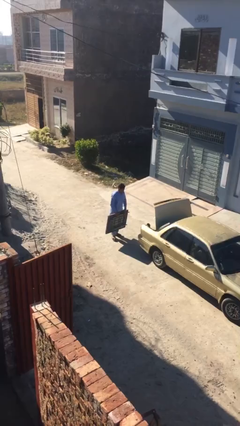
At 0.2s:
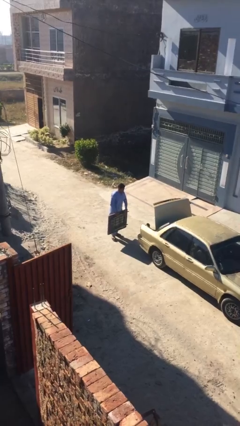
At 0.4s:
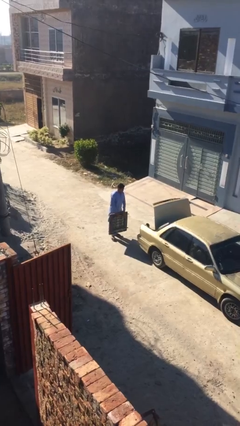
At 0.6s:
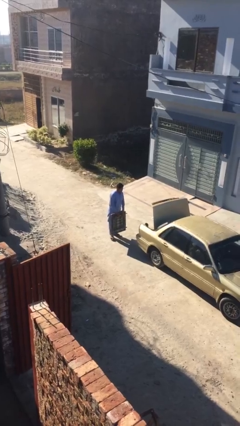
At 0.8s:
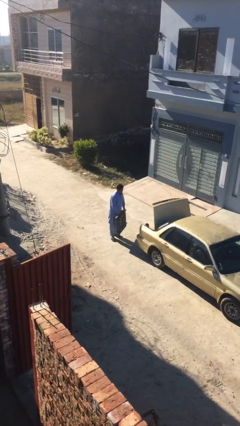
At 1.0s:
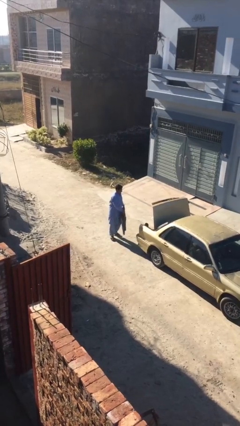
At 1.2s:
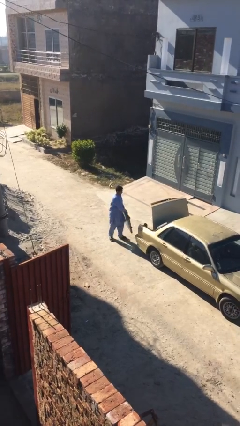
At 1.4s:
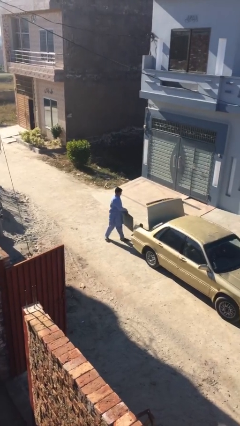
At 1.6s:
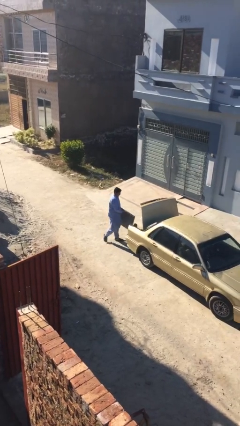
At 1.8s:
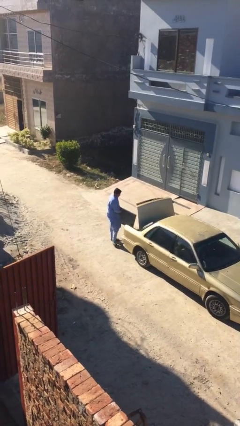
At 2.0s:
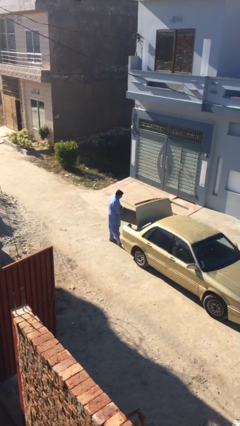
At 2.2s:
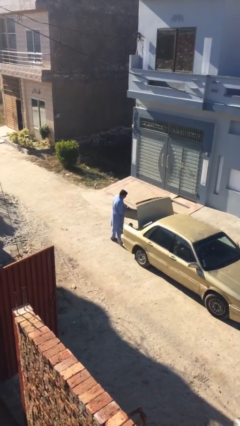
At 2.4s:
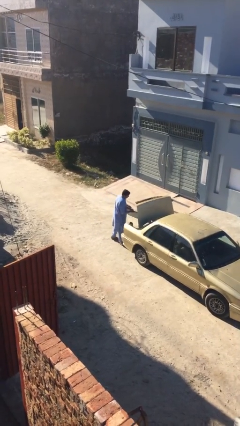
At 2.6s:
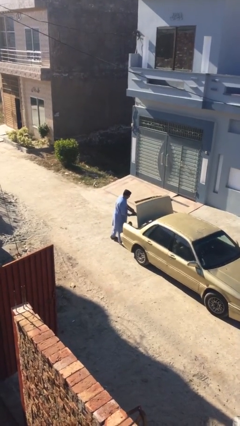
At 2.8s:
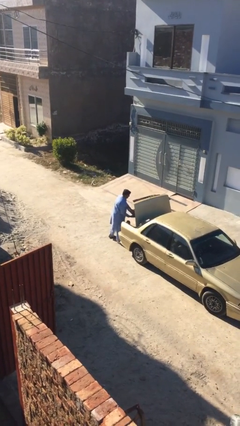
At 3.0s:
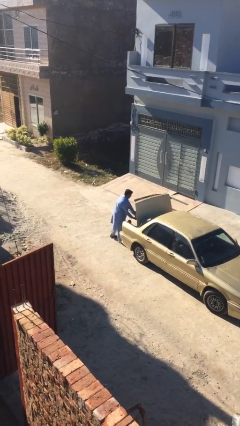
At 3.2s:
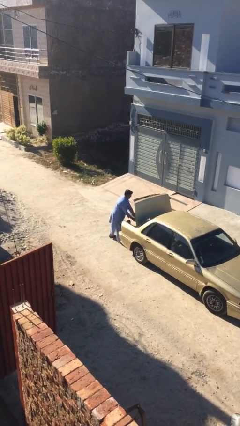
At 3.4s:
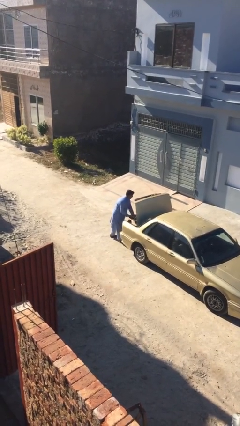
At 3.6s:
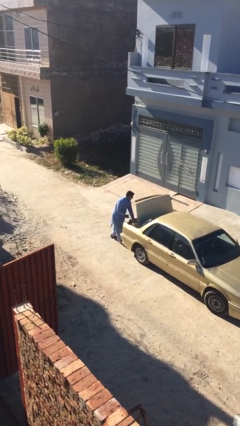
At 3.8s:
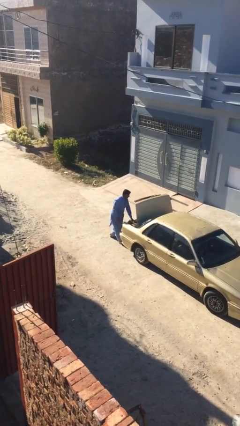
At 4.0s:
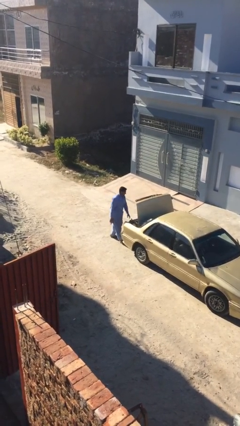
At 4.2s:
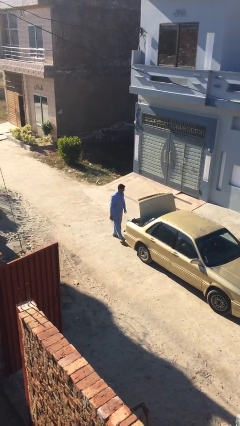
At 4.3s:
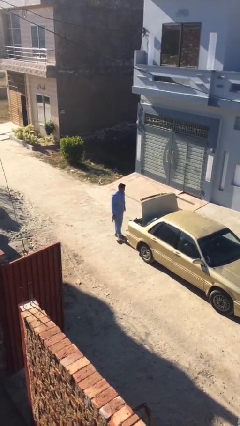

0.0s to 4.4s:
person loads car

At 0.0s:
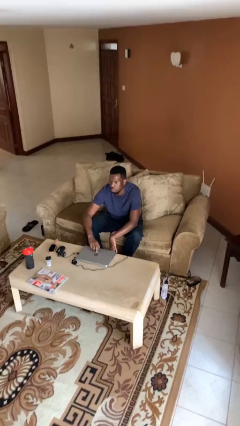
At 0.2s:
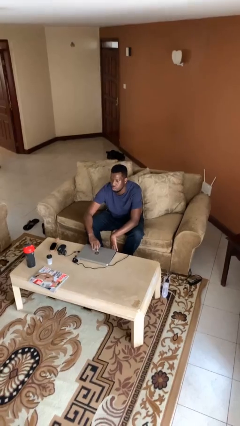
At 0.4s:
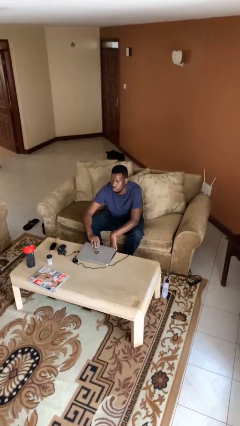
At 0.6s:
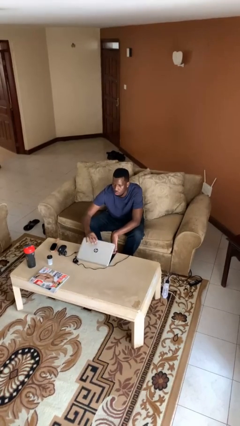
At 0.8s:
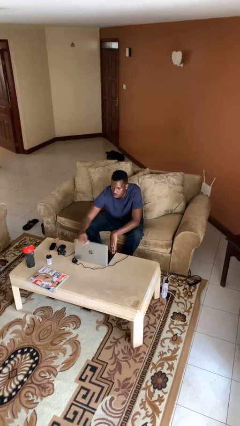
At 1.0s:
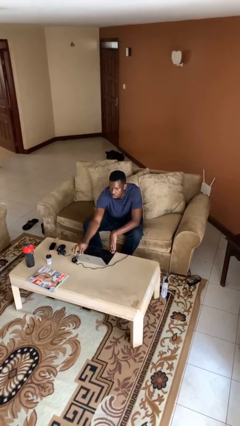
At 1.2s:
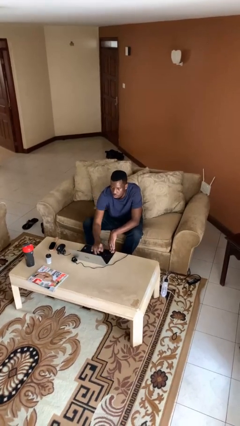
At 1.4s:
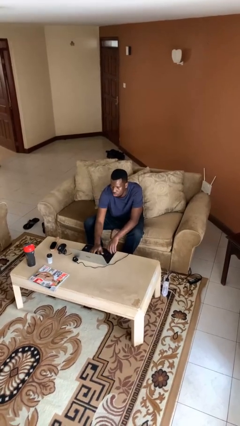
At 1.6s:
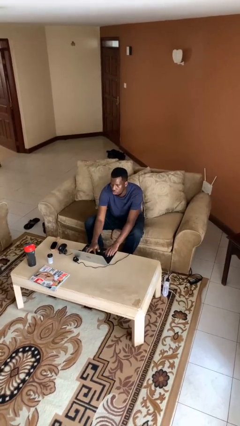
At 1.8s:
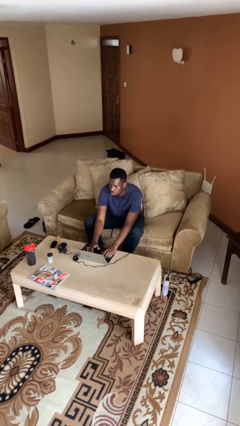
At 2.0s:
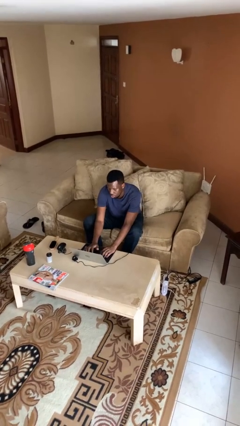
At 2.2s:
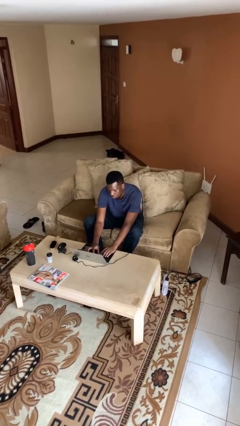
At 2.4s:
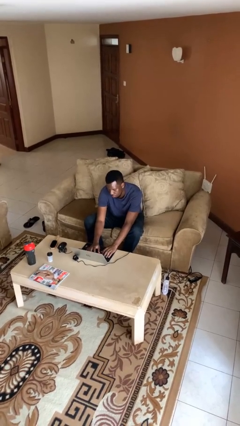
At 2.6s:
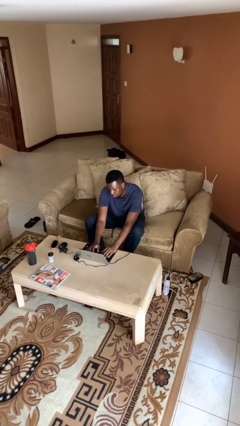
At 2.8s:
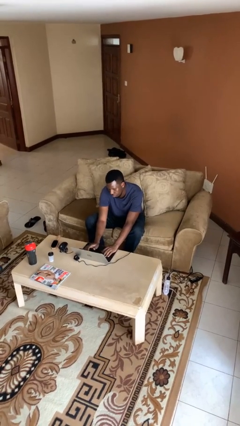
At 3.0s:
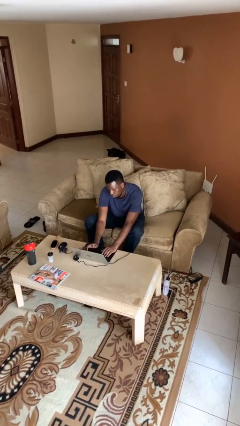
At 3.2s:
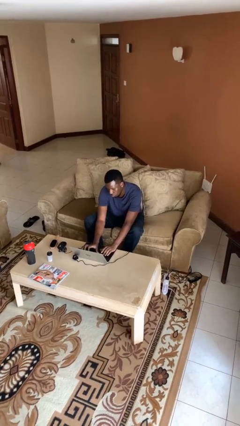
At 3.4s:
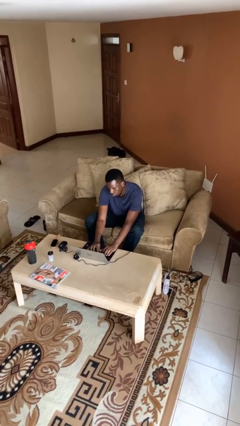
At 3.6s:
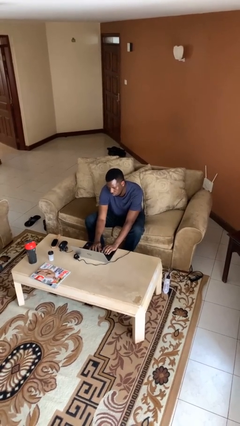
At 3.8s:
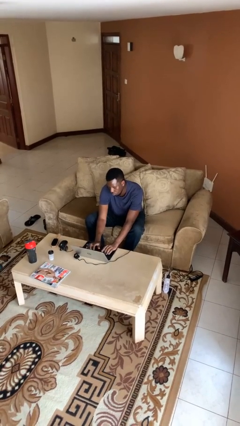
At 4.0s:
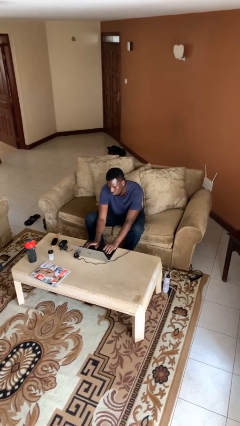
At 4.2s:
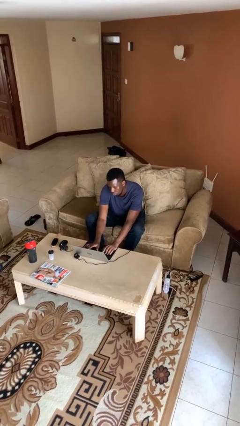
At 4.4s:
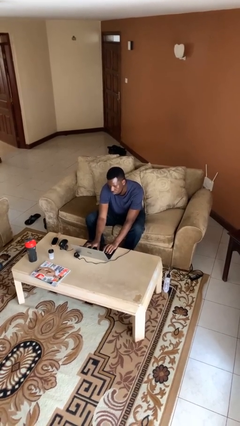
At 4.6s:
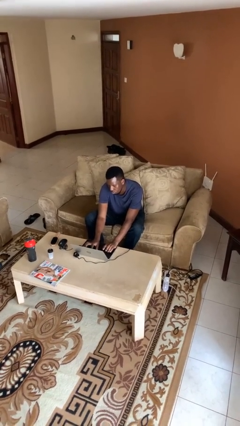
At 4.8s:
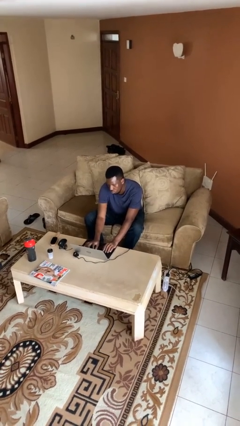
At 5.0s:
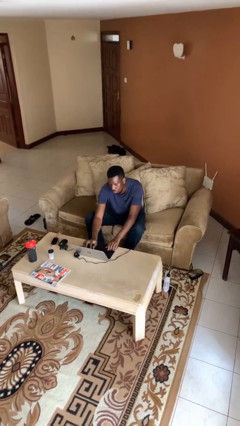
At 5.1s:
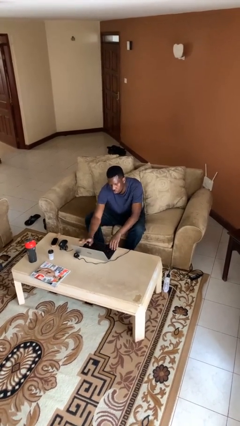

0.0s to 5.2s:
person interacts with laptop

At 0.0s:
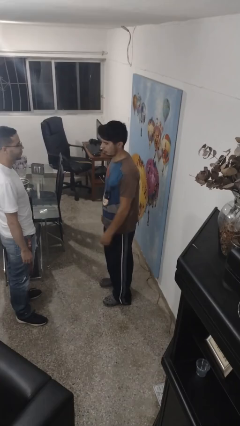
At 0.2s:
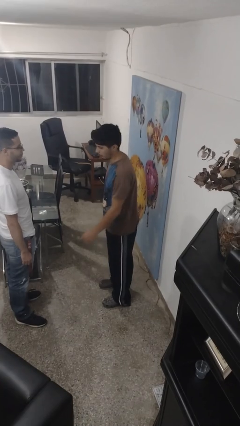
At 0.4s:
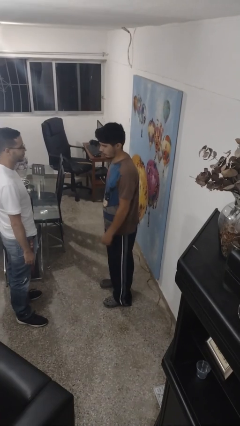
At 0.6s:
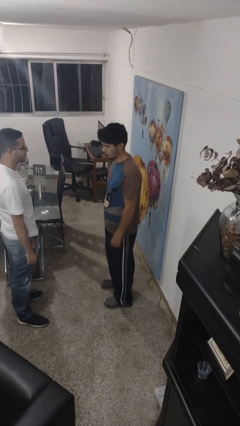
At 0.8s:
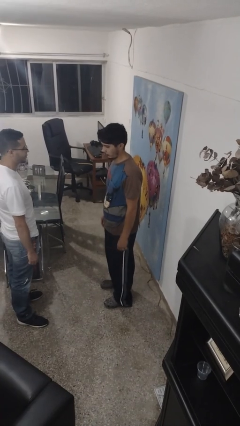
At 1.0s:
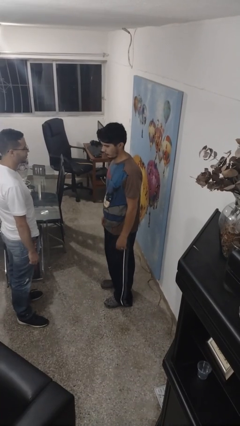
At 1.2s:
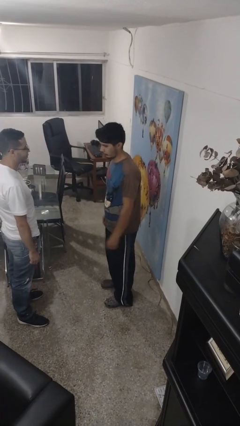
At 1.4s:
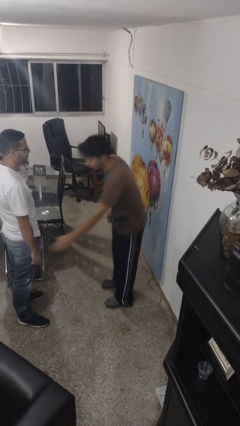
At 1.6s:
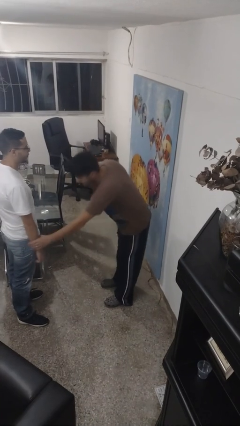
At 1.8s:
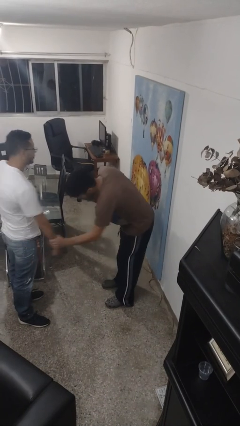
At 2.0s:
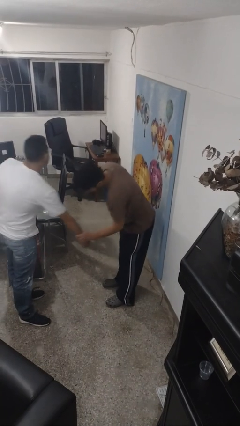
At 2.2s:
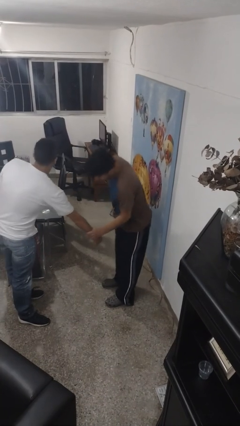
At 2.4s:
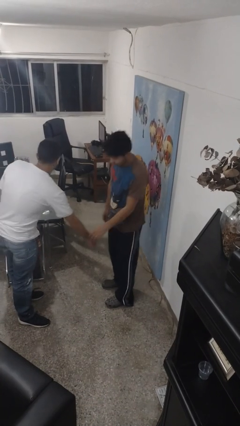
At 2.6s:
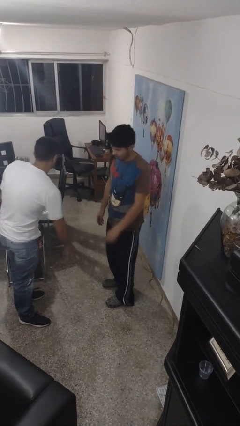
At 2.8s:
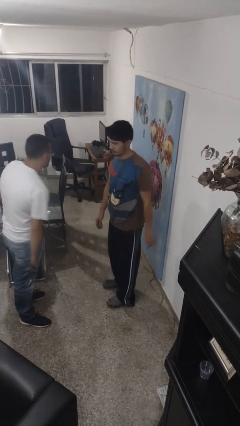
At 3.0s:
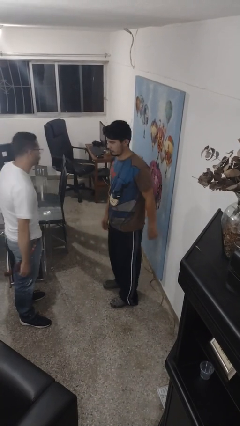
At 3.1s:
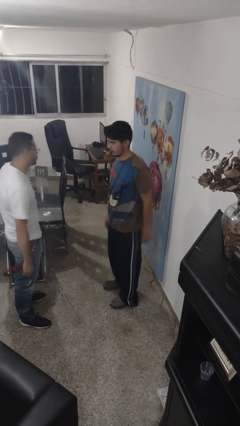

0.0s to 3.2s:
person grabs person by forearm

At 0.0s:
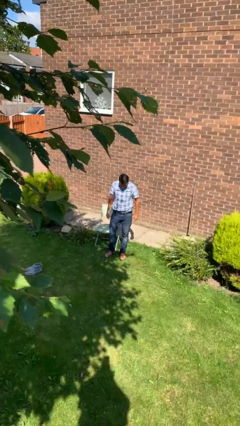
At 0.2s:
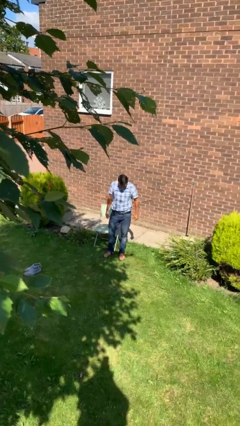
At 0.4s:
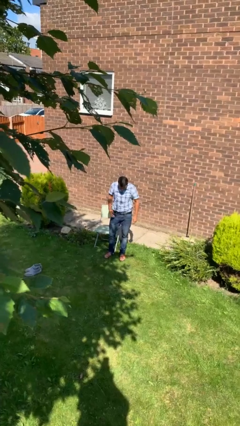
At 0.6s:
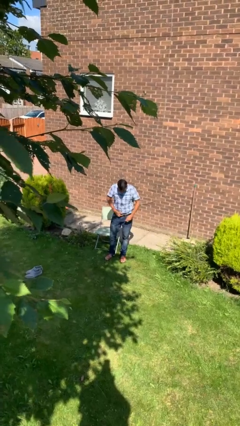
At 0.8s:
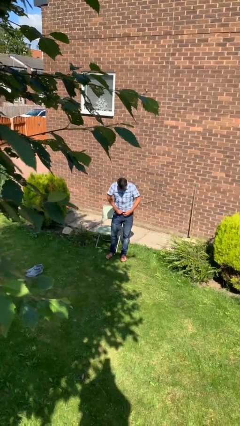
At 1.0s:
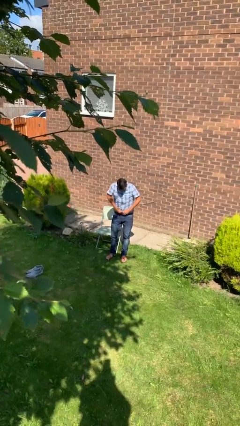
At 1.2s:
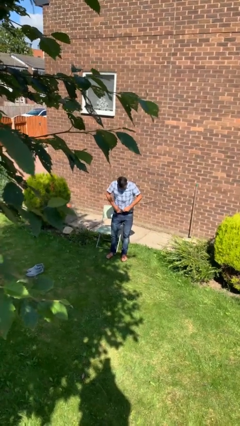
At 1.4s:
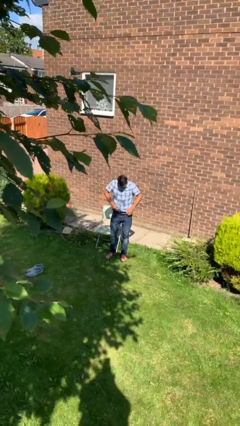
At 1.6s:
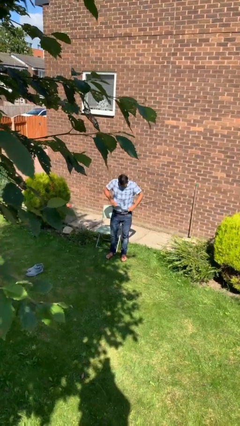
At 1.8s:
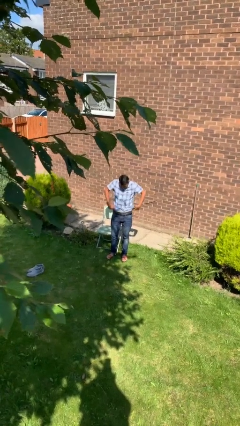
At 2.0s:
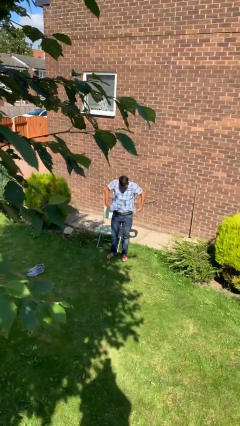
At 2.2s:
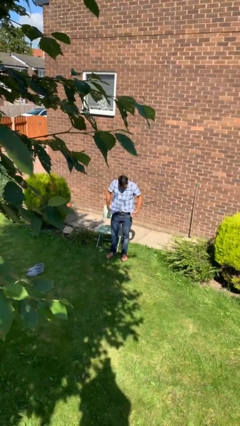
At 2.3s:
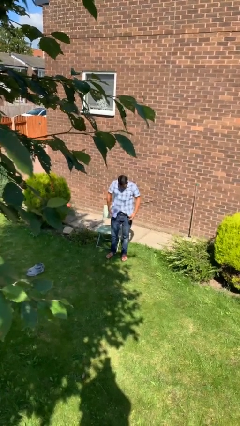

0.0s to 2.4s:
person untucks shirt

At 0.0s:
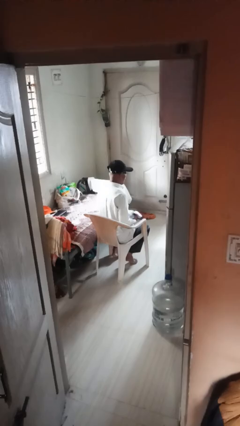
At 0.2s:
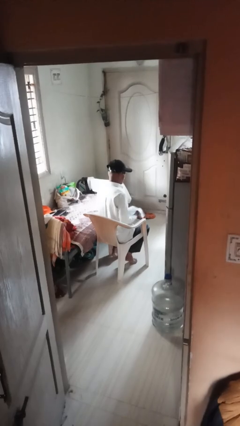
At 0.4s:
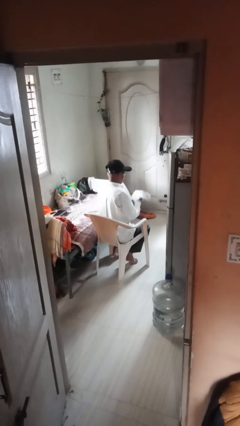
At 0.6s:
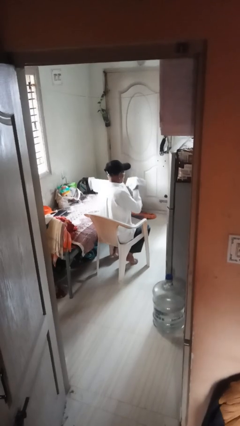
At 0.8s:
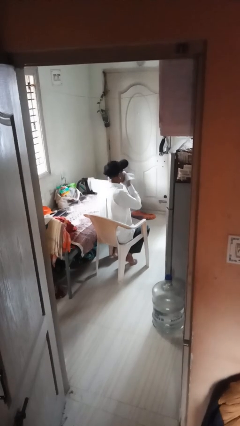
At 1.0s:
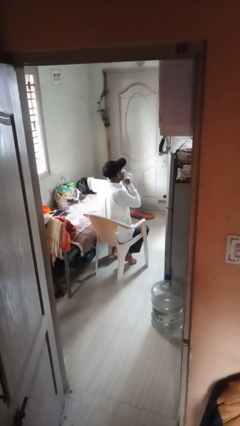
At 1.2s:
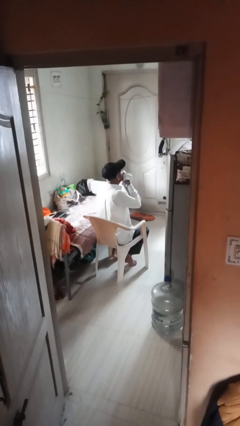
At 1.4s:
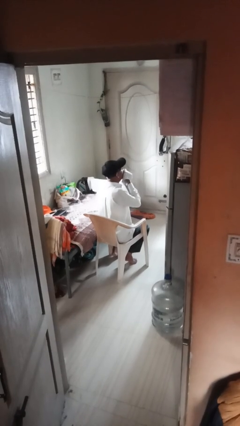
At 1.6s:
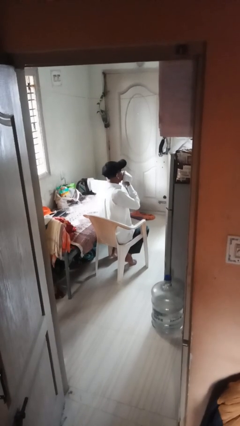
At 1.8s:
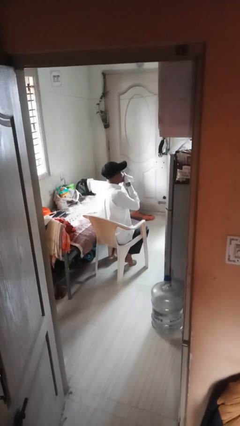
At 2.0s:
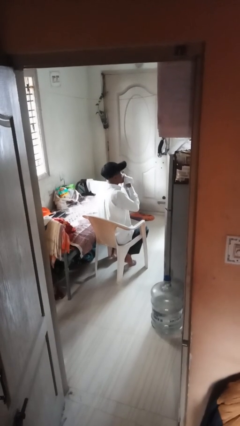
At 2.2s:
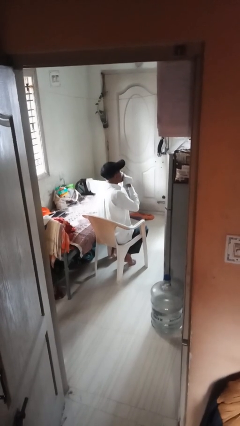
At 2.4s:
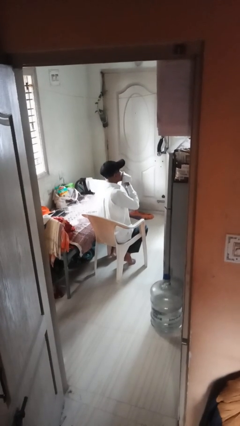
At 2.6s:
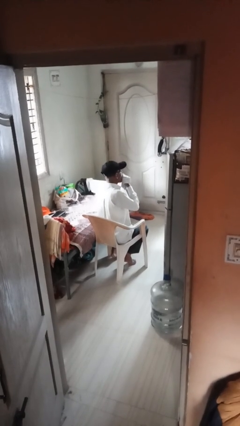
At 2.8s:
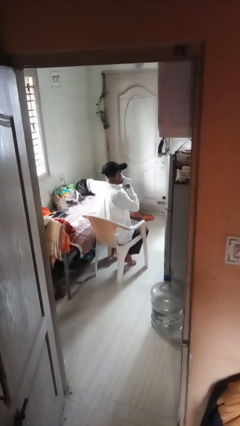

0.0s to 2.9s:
person wipes mouth with napkin

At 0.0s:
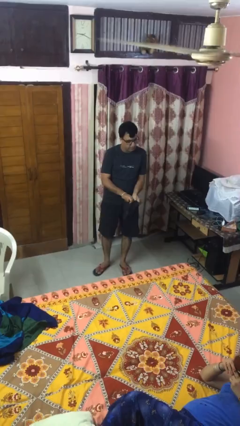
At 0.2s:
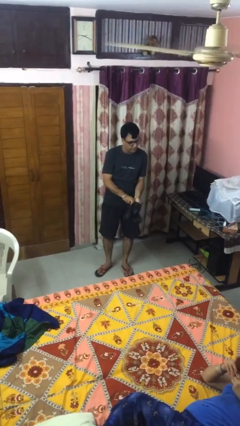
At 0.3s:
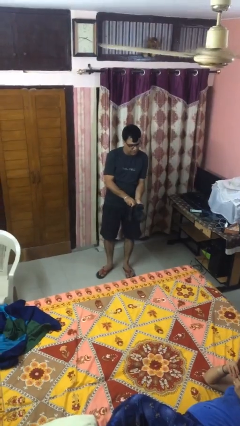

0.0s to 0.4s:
person puts on gloves
